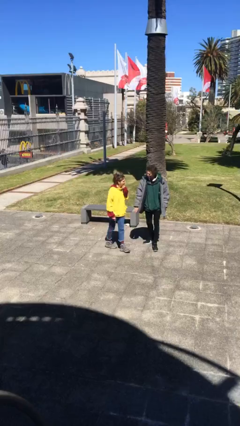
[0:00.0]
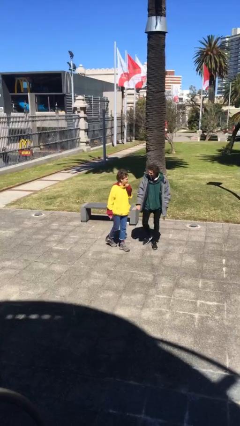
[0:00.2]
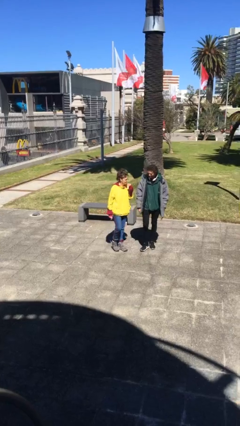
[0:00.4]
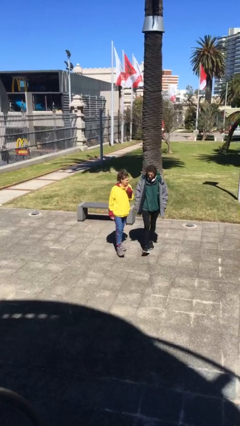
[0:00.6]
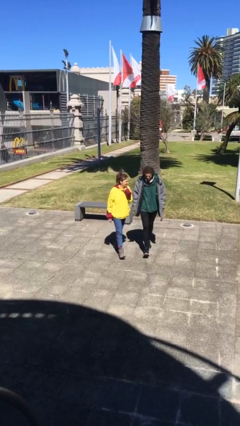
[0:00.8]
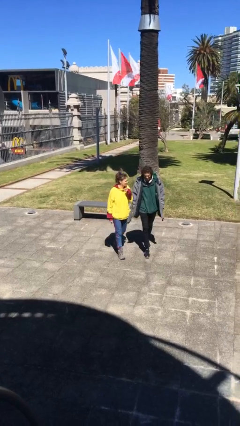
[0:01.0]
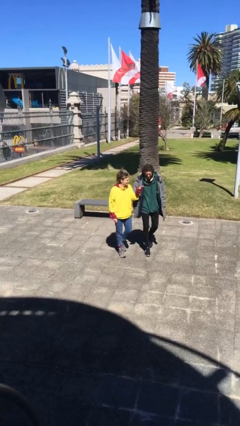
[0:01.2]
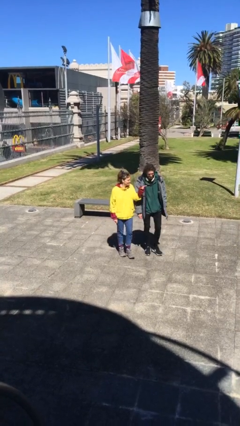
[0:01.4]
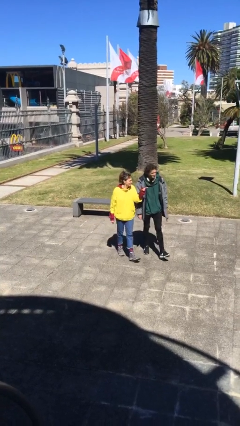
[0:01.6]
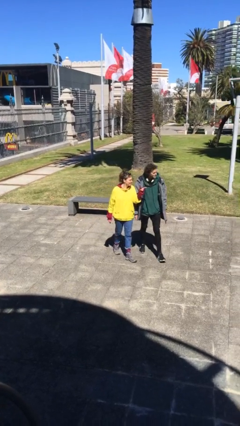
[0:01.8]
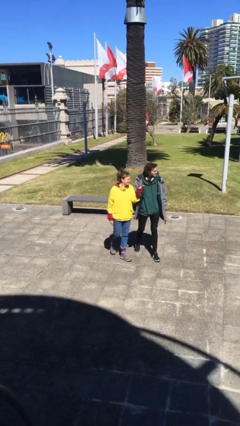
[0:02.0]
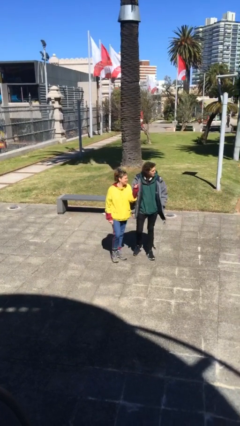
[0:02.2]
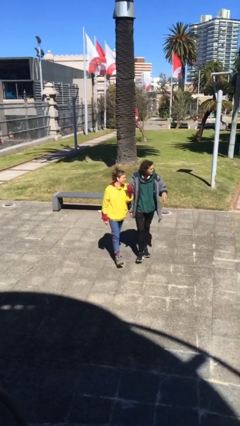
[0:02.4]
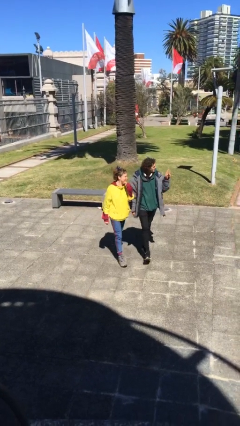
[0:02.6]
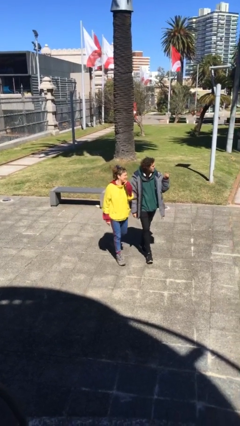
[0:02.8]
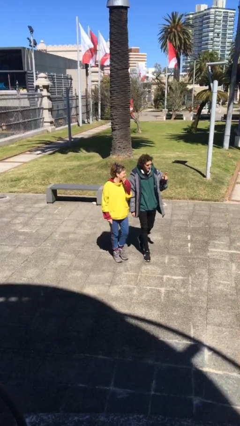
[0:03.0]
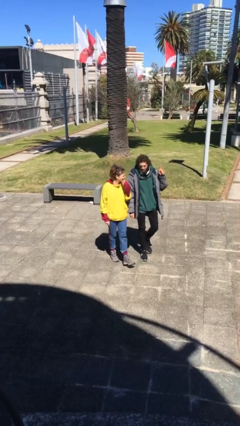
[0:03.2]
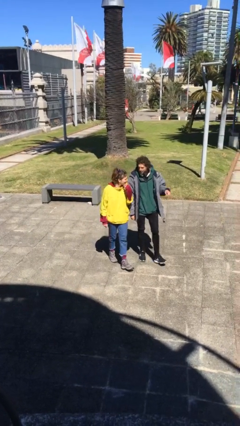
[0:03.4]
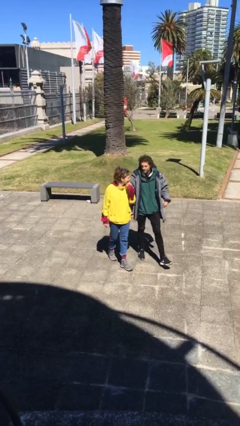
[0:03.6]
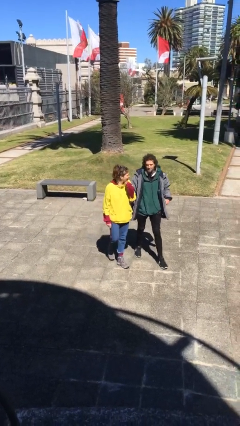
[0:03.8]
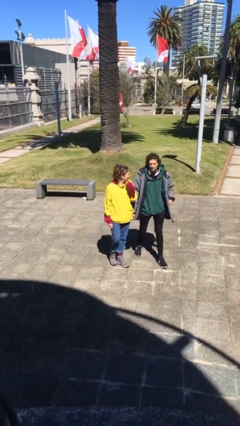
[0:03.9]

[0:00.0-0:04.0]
person talks to person

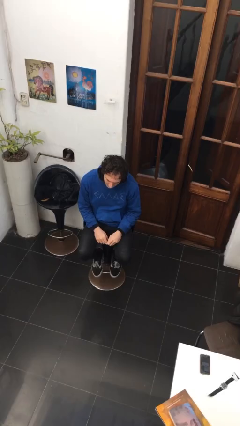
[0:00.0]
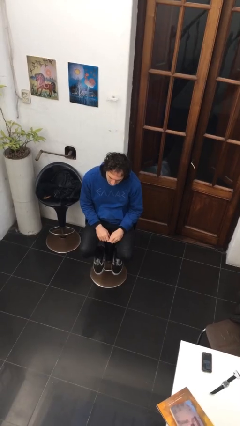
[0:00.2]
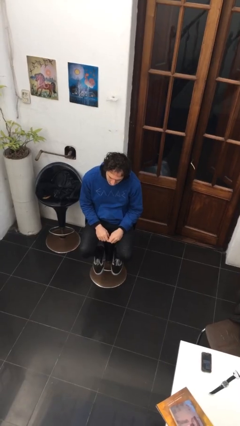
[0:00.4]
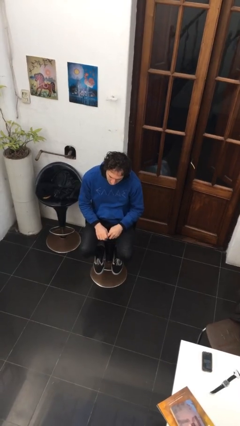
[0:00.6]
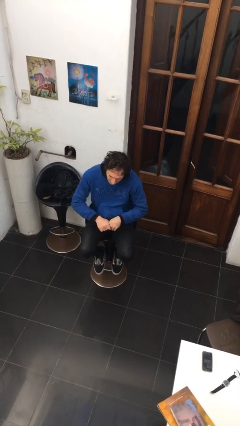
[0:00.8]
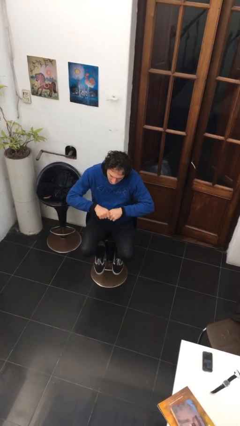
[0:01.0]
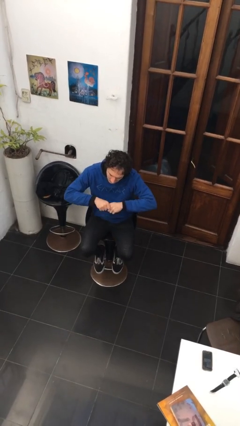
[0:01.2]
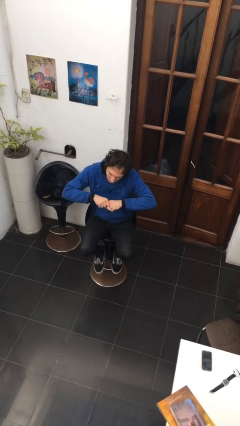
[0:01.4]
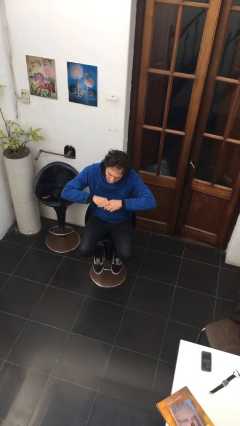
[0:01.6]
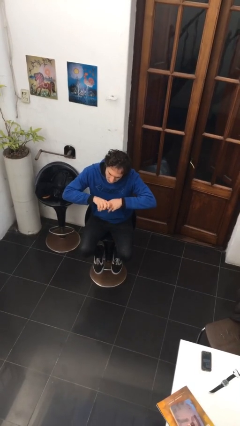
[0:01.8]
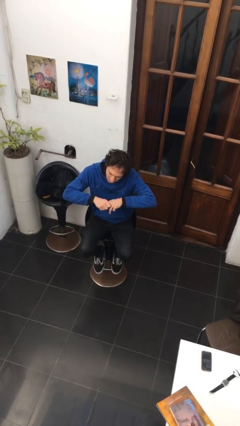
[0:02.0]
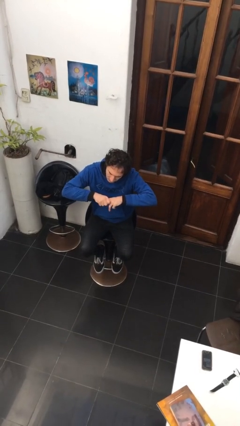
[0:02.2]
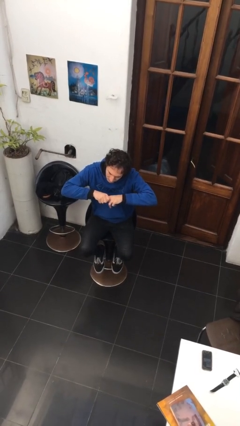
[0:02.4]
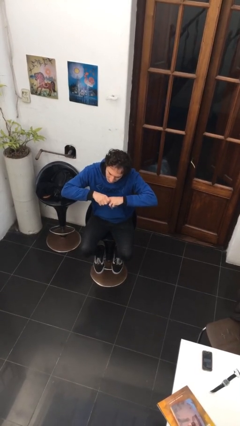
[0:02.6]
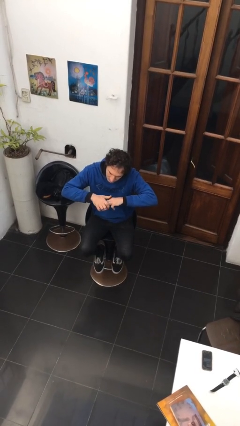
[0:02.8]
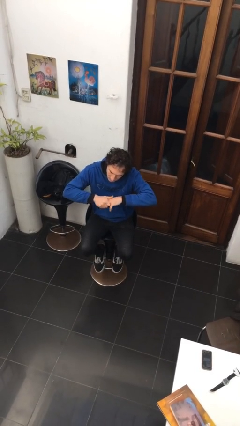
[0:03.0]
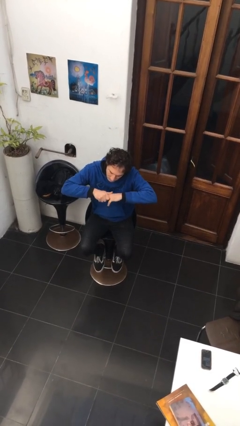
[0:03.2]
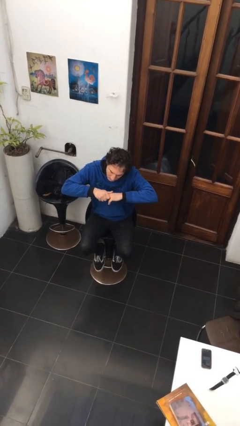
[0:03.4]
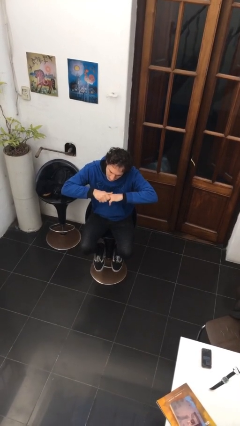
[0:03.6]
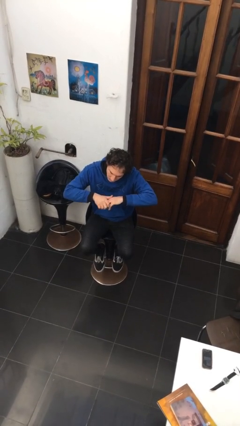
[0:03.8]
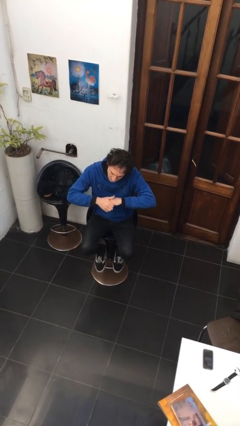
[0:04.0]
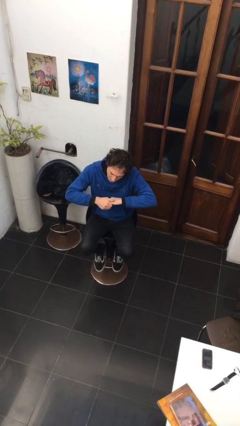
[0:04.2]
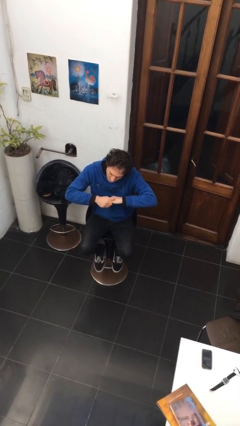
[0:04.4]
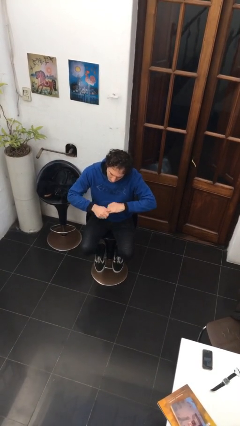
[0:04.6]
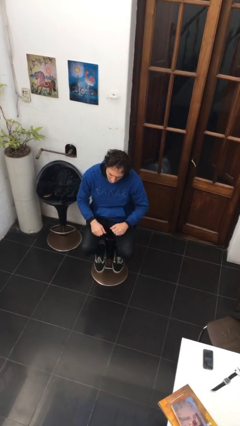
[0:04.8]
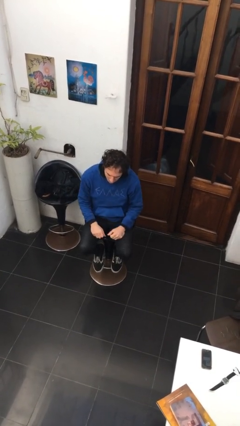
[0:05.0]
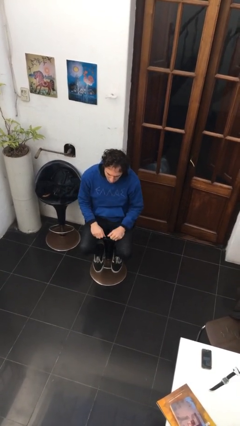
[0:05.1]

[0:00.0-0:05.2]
person cracks knuckles

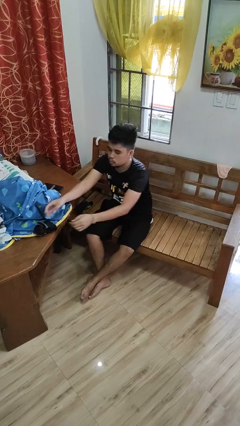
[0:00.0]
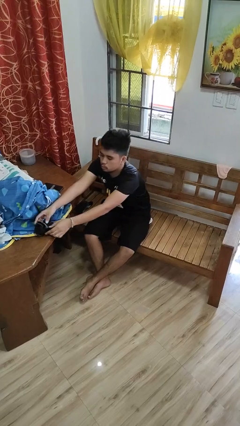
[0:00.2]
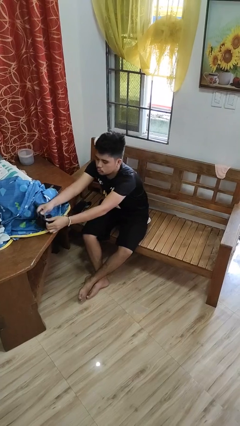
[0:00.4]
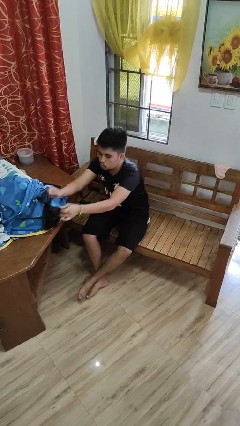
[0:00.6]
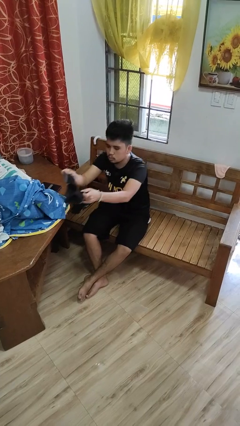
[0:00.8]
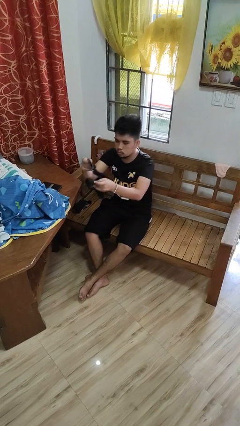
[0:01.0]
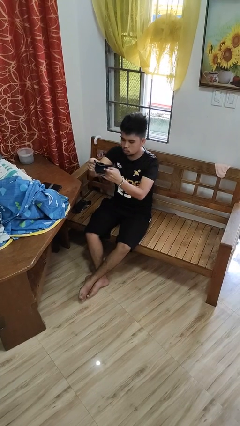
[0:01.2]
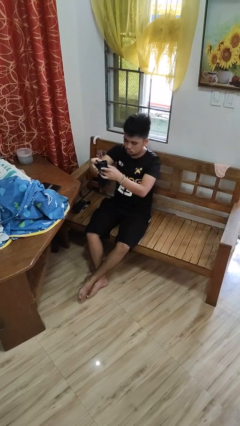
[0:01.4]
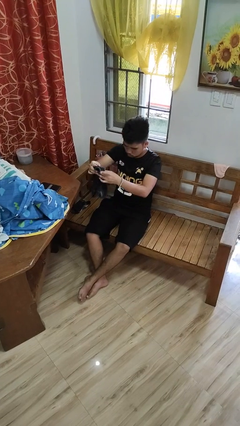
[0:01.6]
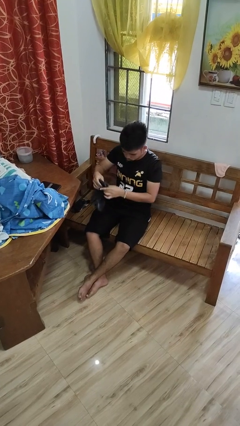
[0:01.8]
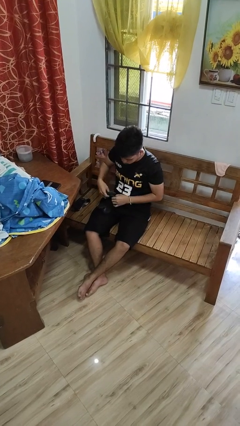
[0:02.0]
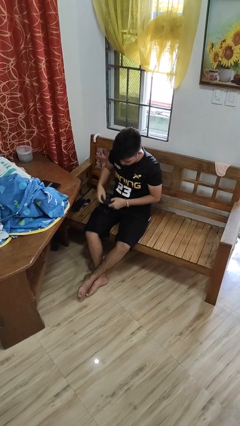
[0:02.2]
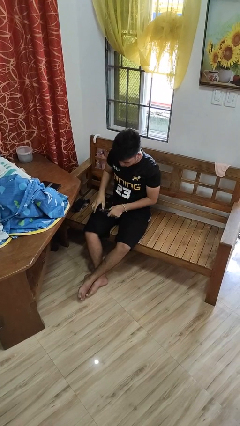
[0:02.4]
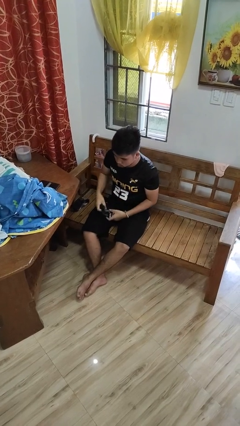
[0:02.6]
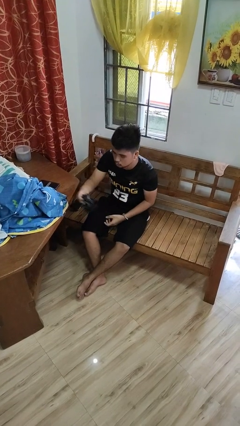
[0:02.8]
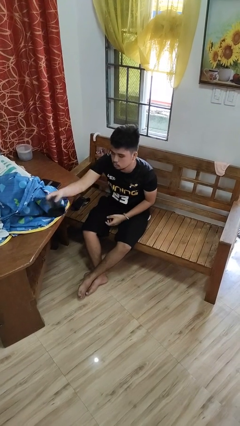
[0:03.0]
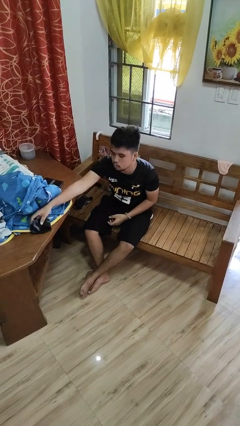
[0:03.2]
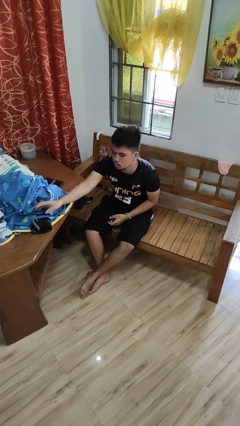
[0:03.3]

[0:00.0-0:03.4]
person folds socks

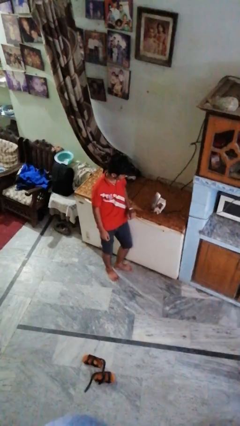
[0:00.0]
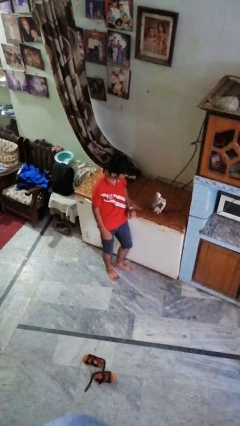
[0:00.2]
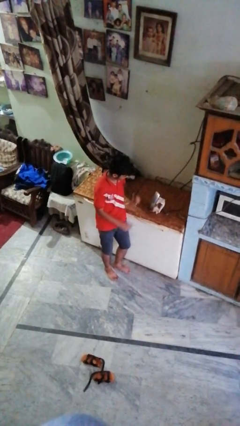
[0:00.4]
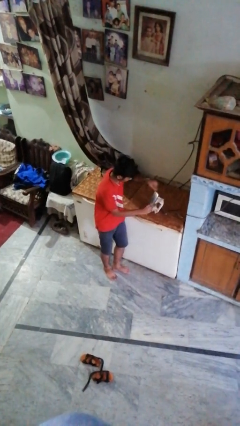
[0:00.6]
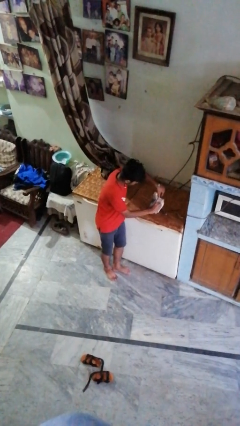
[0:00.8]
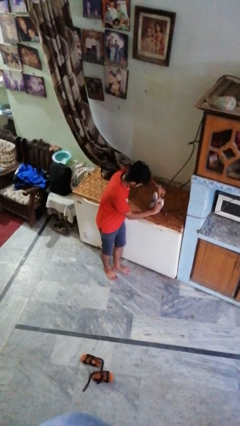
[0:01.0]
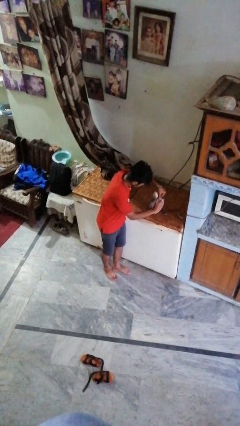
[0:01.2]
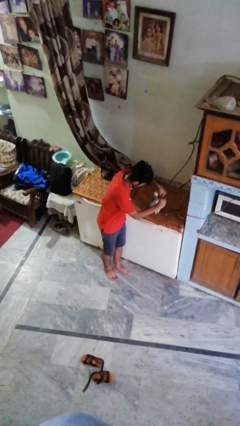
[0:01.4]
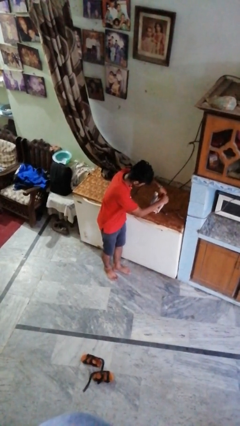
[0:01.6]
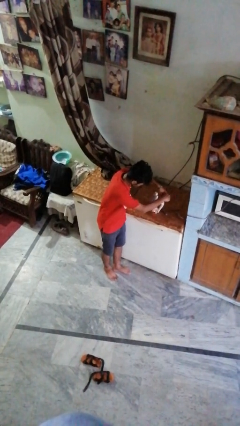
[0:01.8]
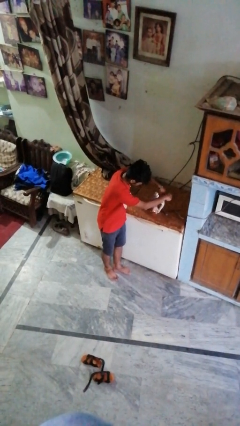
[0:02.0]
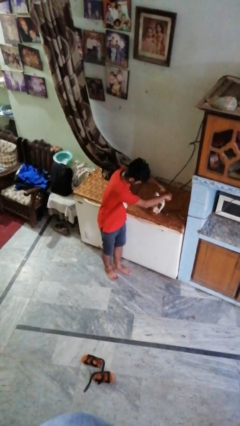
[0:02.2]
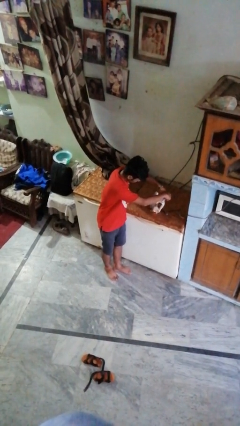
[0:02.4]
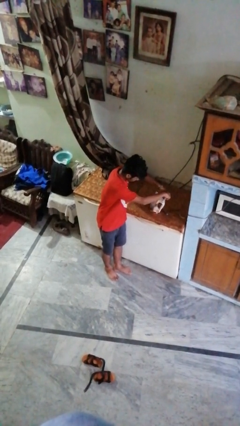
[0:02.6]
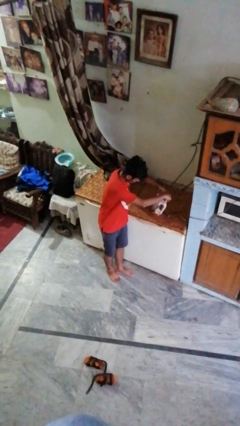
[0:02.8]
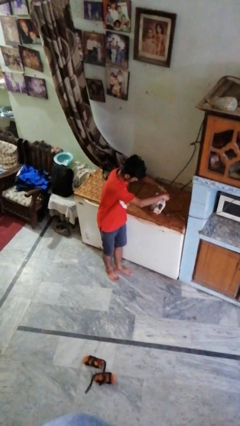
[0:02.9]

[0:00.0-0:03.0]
person adjusts thermostat

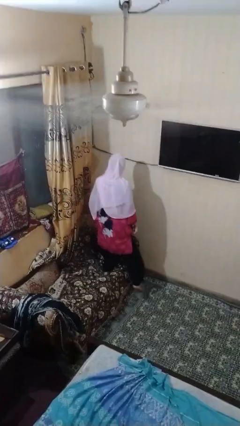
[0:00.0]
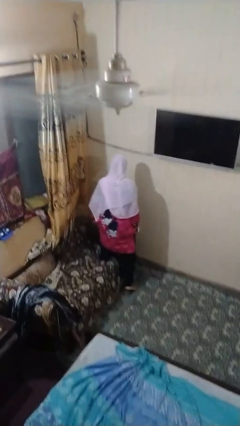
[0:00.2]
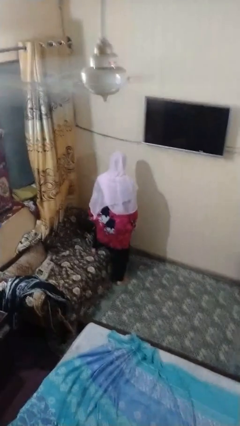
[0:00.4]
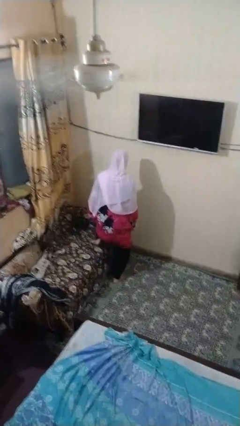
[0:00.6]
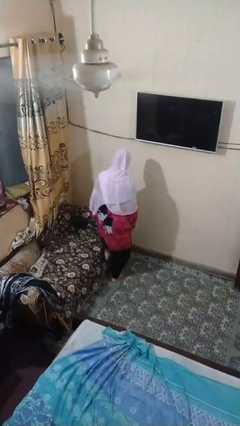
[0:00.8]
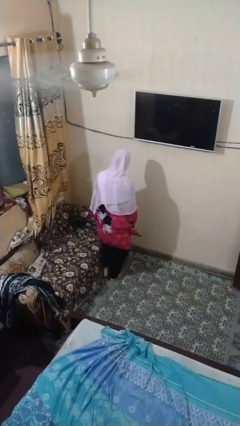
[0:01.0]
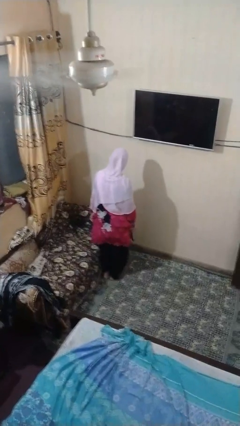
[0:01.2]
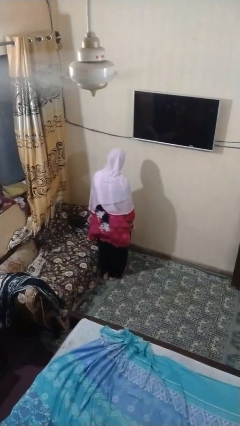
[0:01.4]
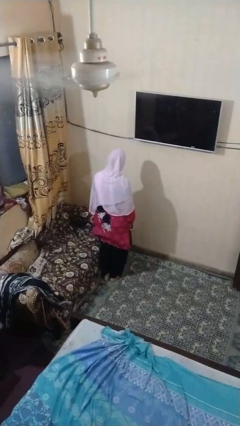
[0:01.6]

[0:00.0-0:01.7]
person climbs off couch
